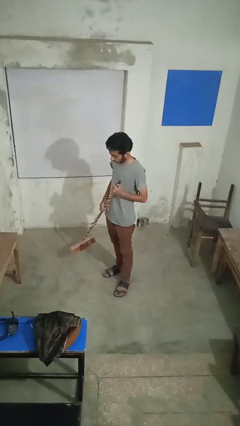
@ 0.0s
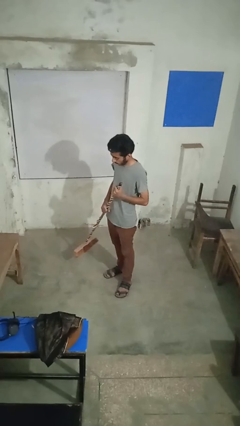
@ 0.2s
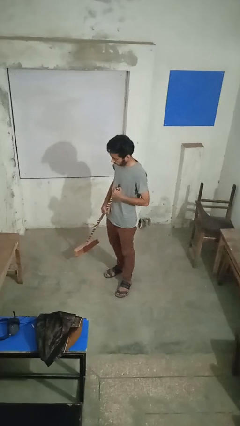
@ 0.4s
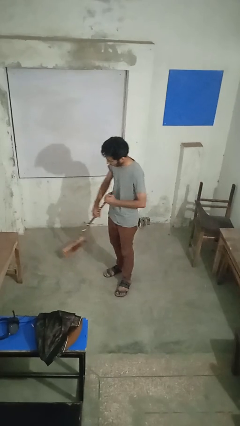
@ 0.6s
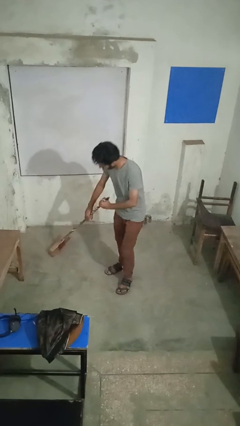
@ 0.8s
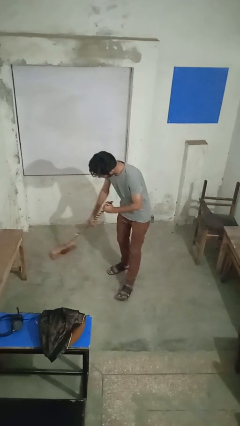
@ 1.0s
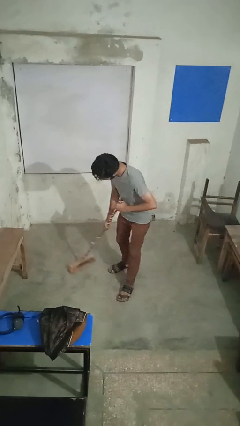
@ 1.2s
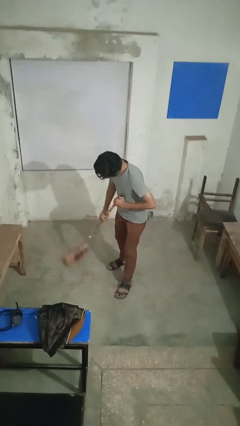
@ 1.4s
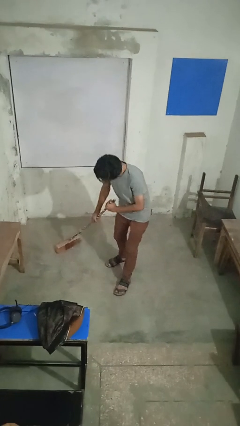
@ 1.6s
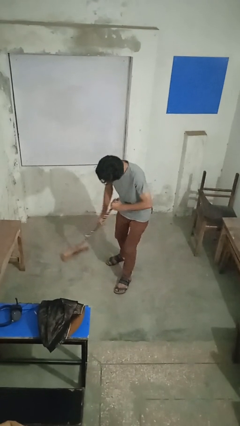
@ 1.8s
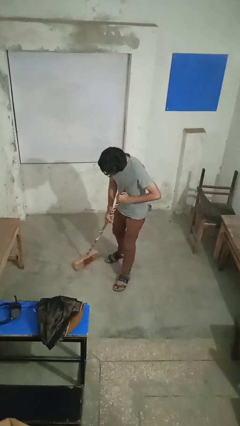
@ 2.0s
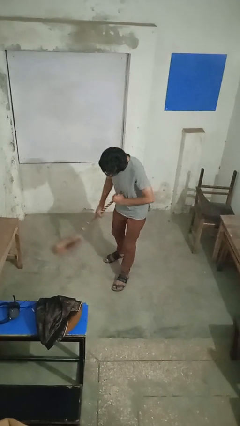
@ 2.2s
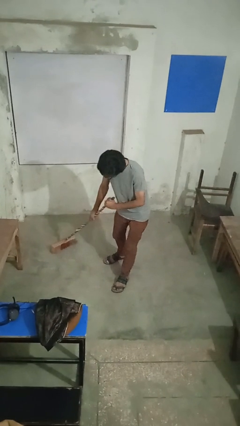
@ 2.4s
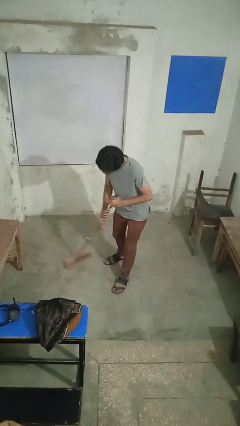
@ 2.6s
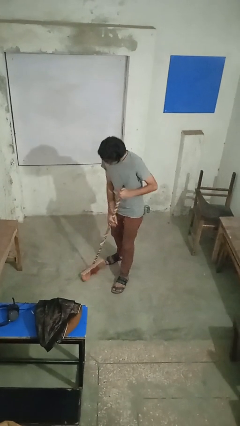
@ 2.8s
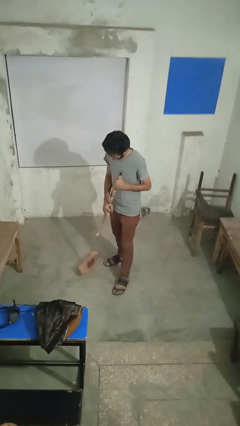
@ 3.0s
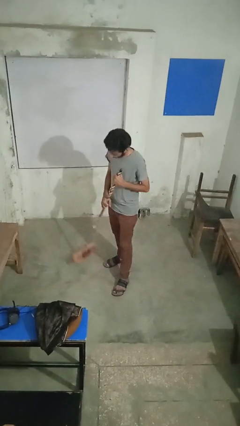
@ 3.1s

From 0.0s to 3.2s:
person sweeps floor

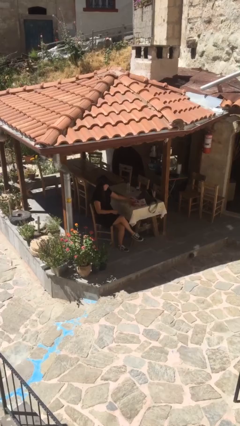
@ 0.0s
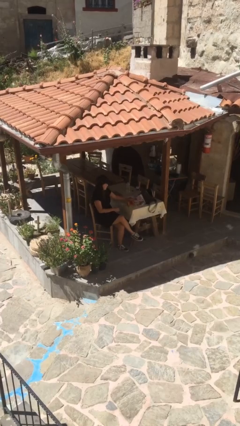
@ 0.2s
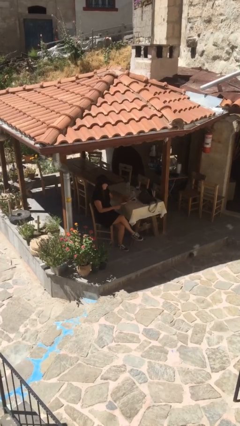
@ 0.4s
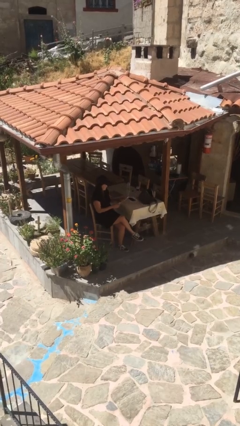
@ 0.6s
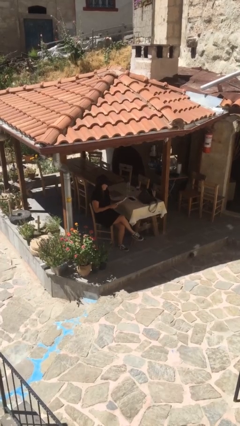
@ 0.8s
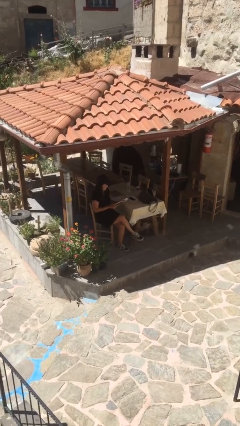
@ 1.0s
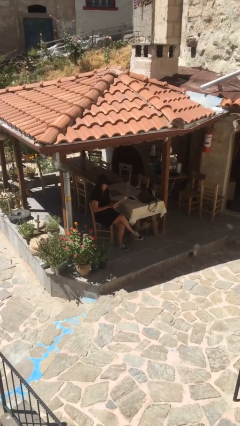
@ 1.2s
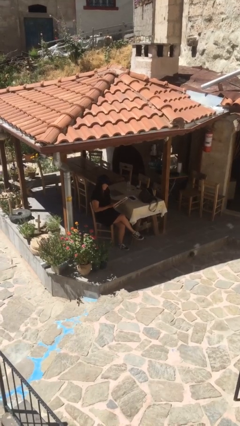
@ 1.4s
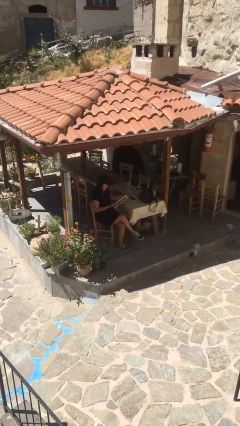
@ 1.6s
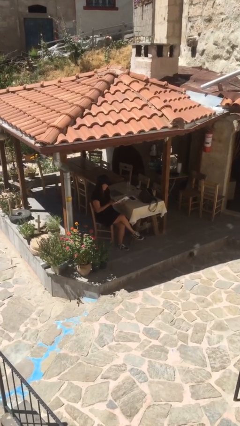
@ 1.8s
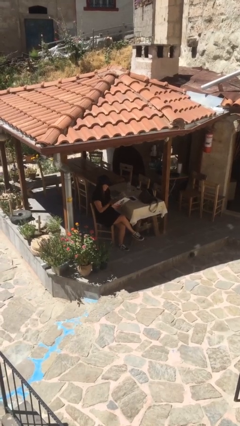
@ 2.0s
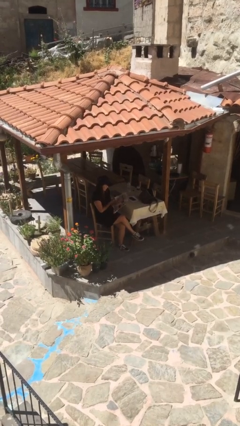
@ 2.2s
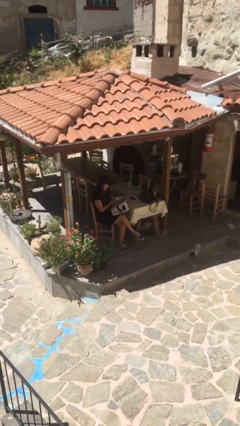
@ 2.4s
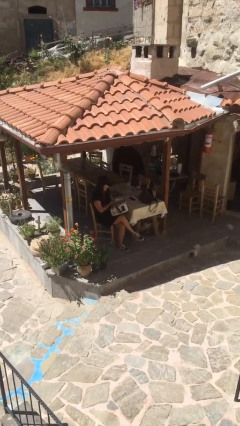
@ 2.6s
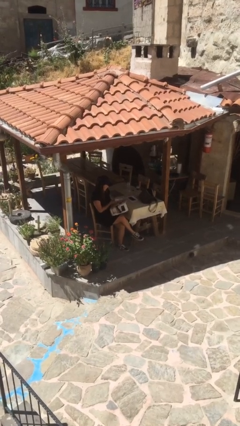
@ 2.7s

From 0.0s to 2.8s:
person picks up object from table

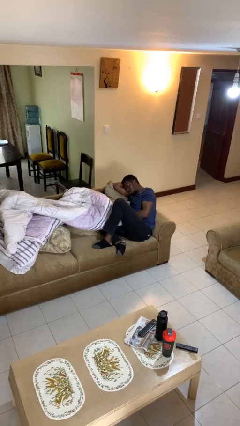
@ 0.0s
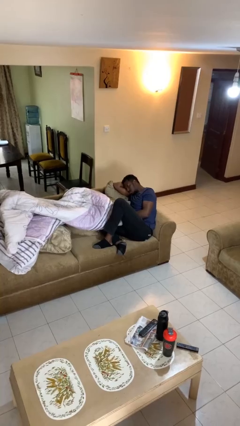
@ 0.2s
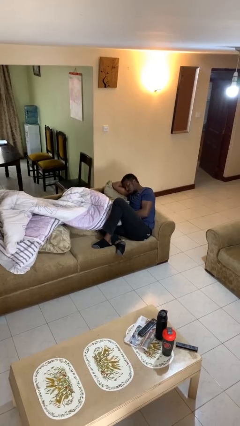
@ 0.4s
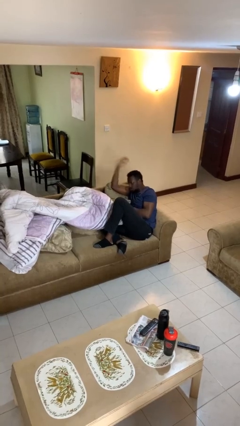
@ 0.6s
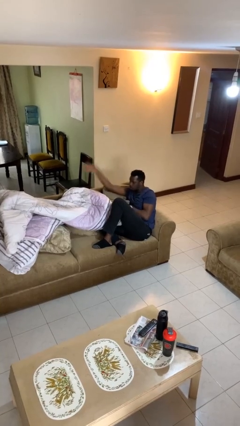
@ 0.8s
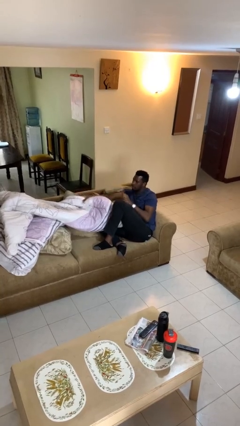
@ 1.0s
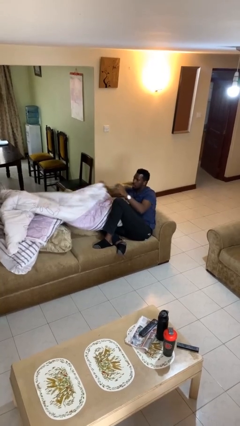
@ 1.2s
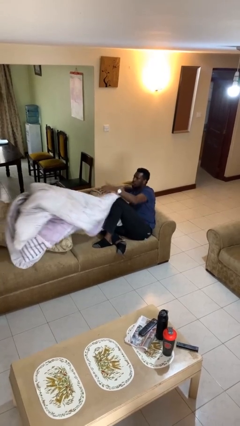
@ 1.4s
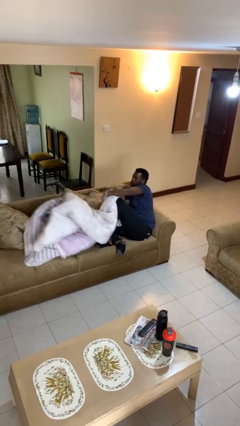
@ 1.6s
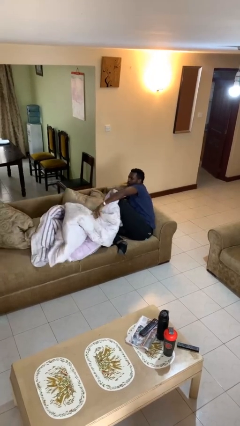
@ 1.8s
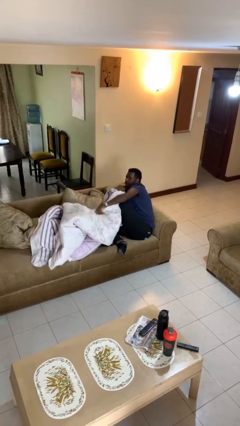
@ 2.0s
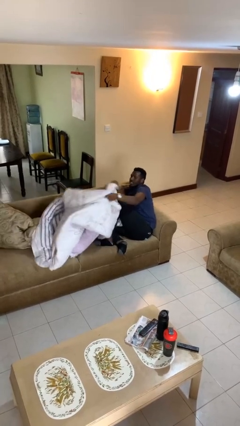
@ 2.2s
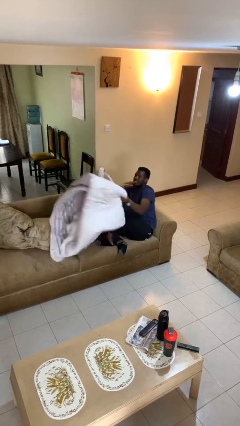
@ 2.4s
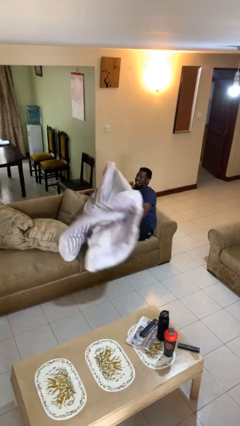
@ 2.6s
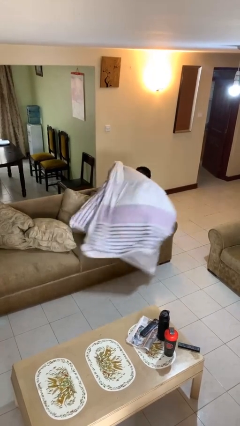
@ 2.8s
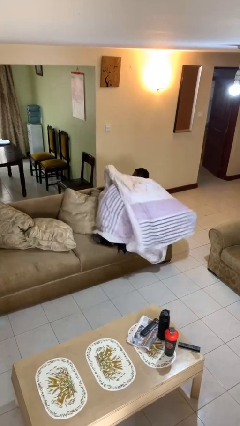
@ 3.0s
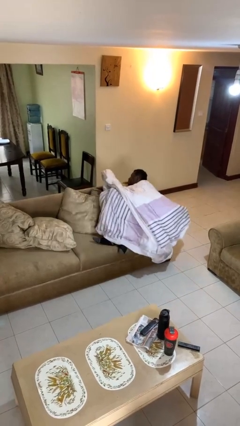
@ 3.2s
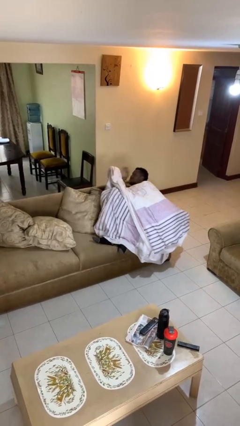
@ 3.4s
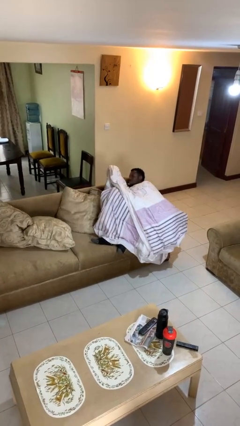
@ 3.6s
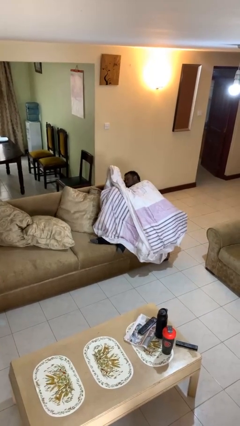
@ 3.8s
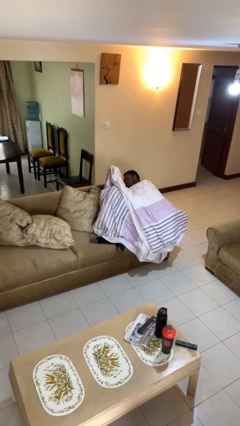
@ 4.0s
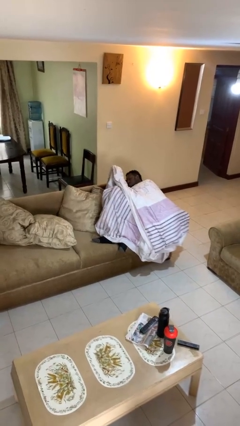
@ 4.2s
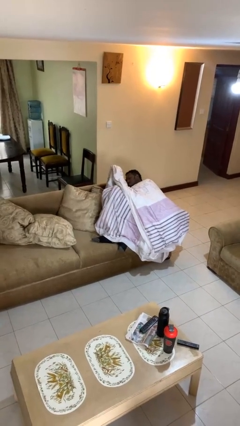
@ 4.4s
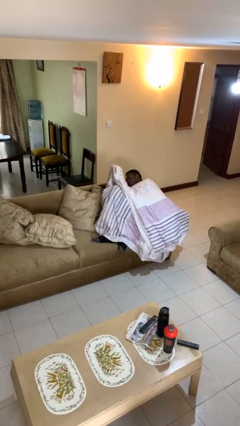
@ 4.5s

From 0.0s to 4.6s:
person covers with blanket

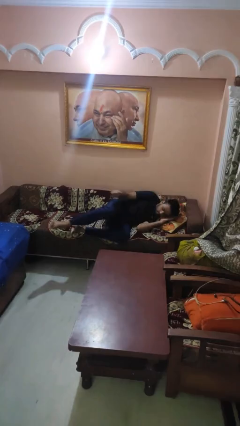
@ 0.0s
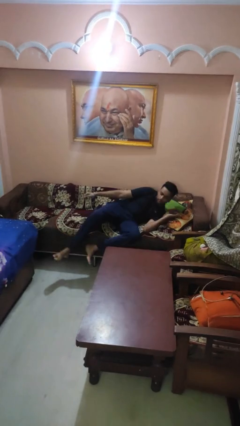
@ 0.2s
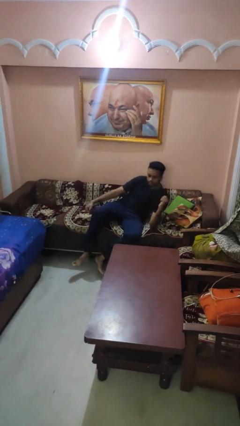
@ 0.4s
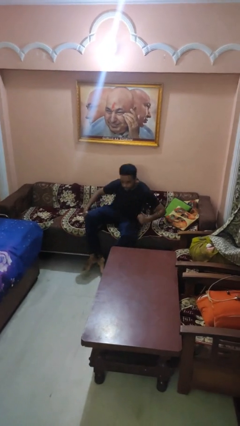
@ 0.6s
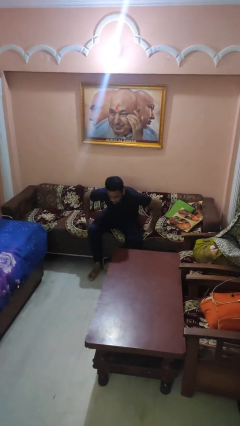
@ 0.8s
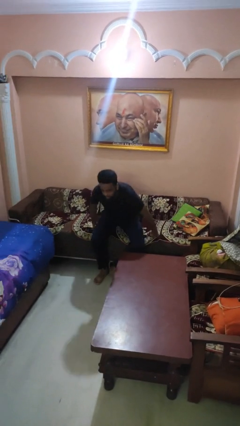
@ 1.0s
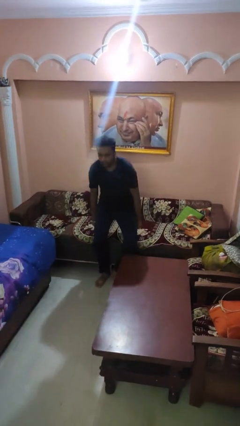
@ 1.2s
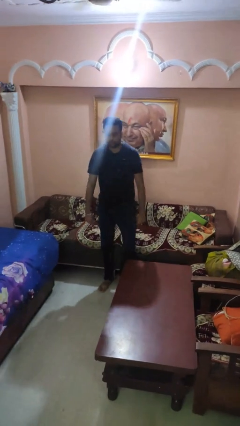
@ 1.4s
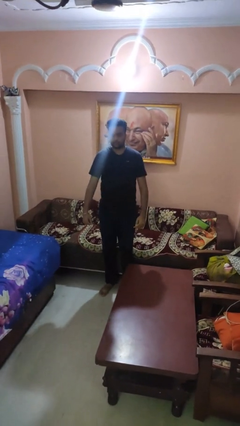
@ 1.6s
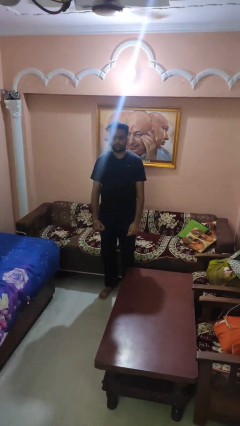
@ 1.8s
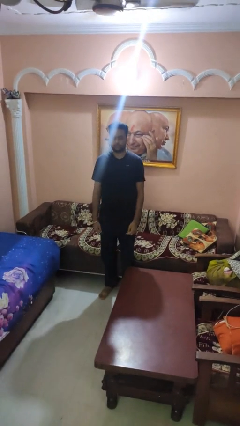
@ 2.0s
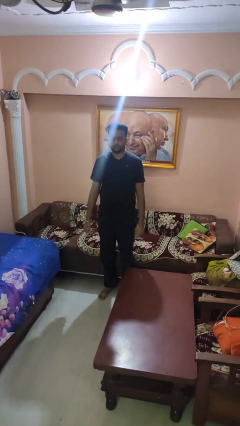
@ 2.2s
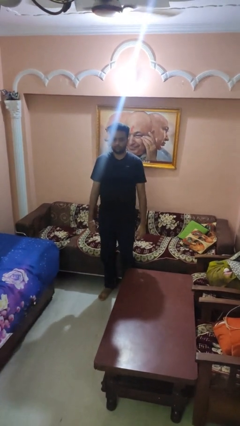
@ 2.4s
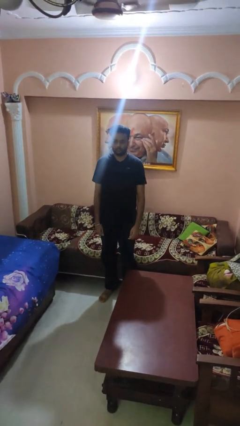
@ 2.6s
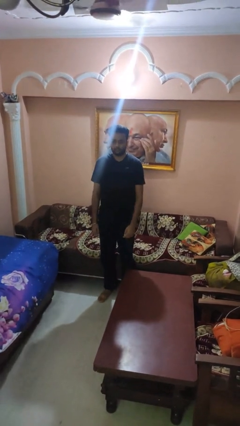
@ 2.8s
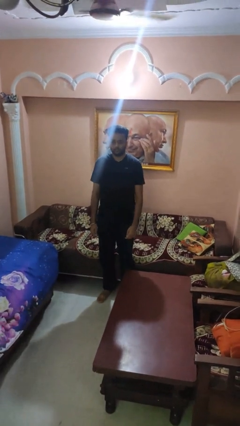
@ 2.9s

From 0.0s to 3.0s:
person stands up

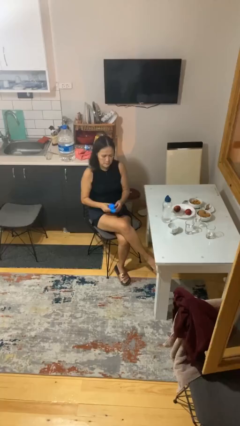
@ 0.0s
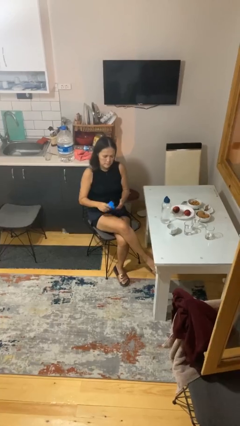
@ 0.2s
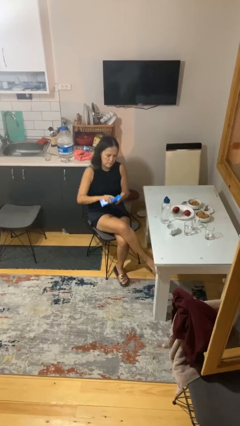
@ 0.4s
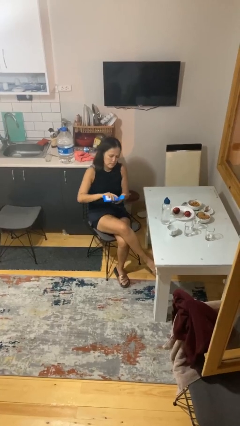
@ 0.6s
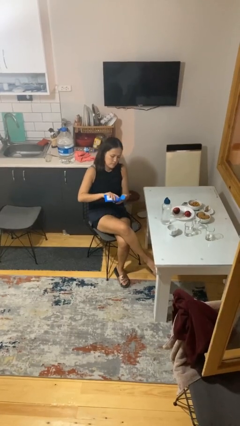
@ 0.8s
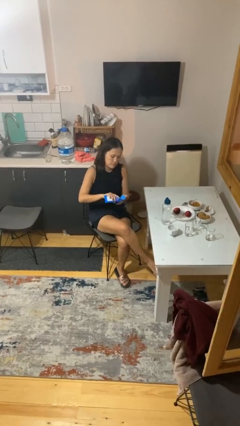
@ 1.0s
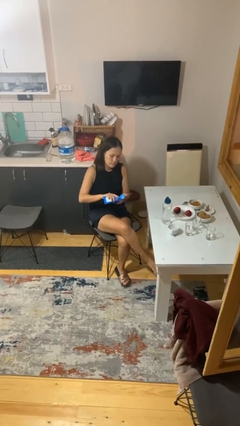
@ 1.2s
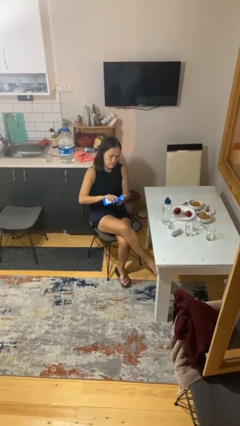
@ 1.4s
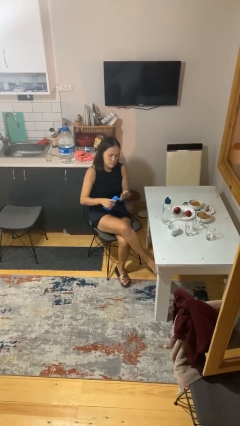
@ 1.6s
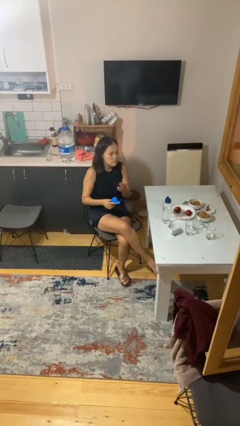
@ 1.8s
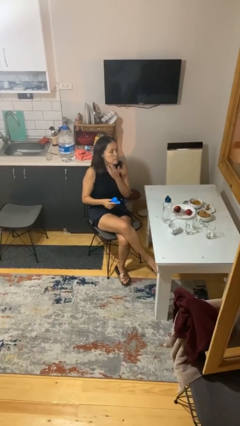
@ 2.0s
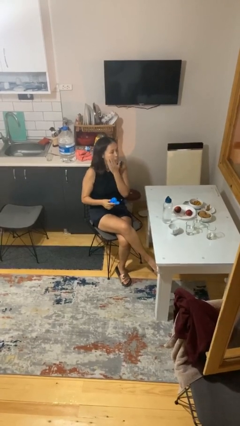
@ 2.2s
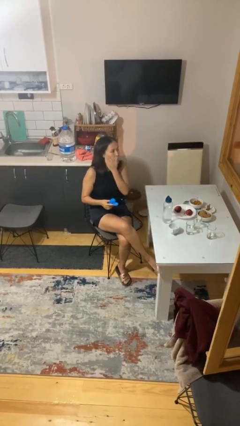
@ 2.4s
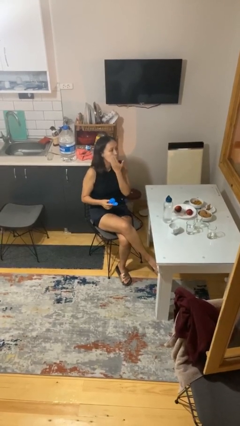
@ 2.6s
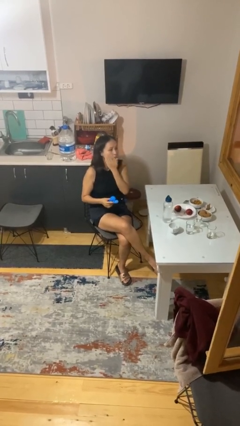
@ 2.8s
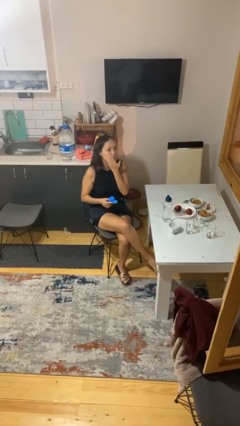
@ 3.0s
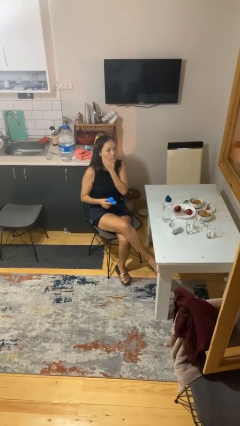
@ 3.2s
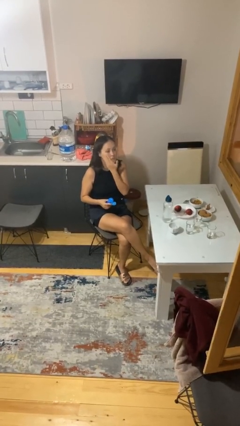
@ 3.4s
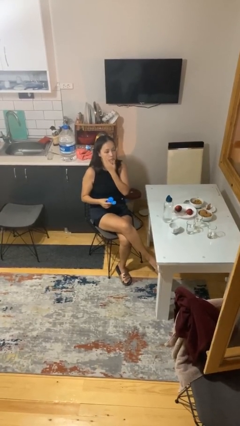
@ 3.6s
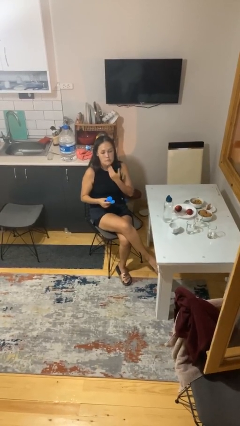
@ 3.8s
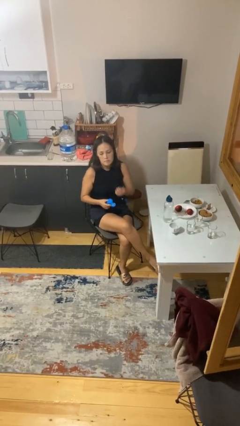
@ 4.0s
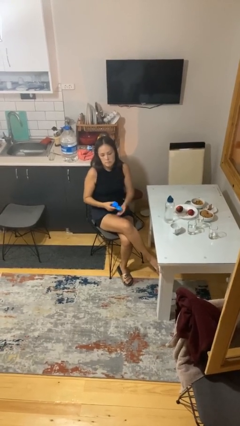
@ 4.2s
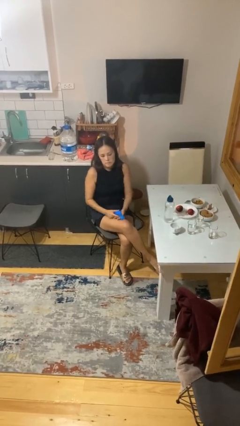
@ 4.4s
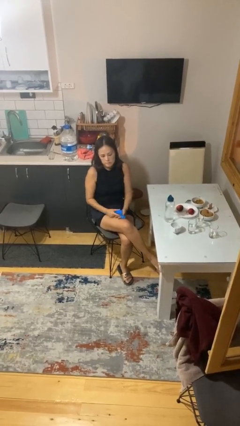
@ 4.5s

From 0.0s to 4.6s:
person applies facial moisturizer
